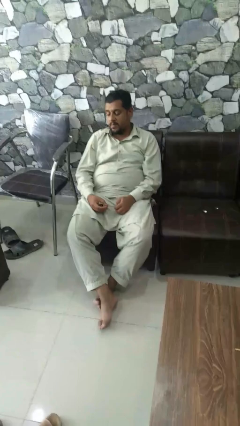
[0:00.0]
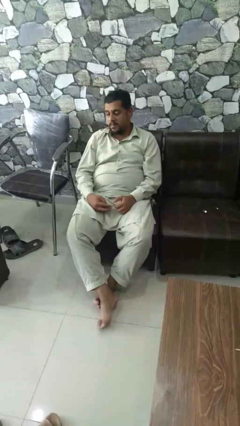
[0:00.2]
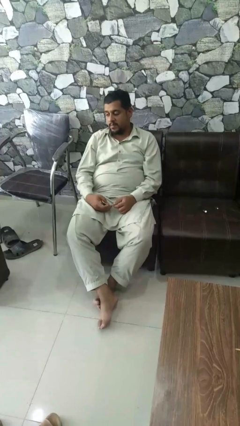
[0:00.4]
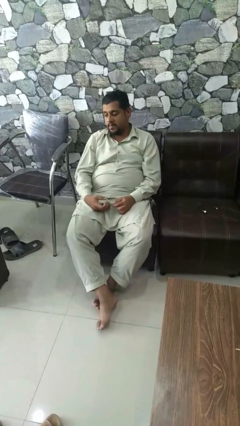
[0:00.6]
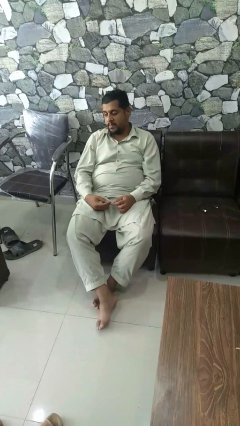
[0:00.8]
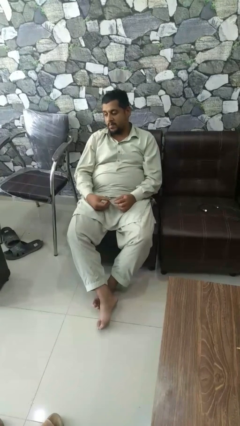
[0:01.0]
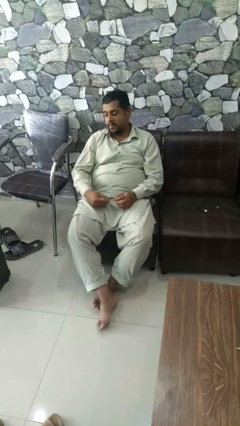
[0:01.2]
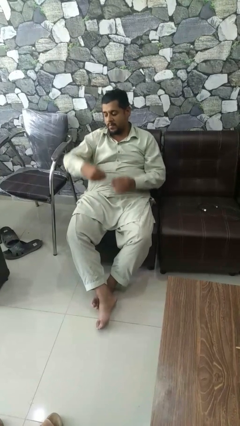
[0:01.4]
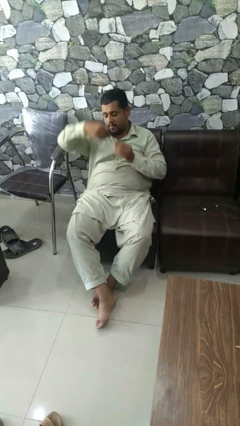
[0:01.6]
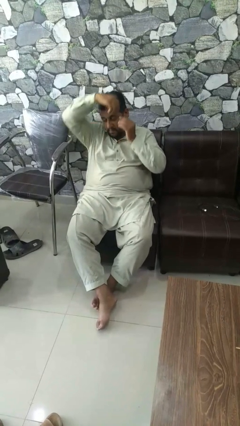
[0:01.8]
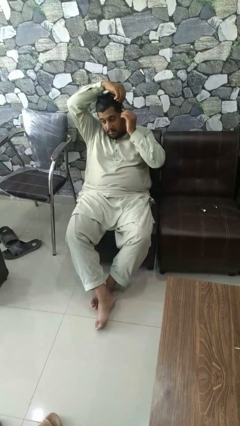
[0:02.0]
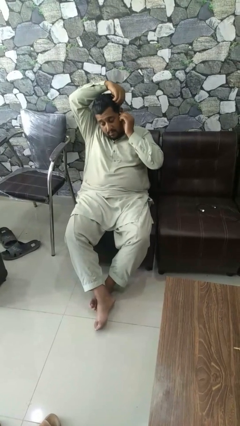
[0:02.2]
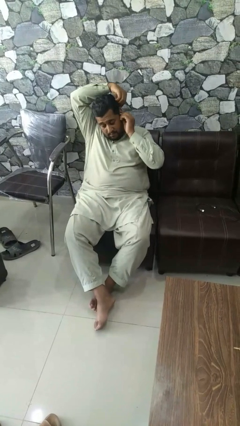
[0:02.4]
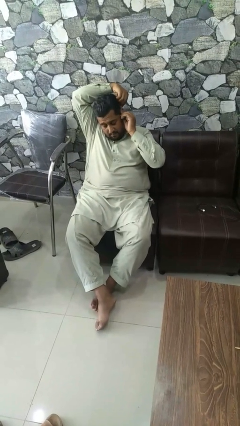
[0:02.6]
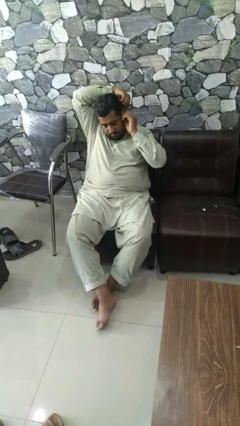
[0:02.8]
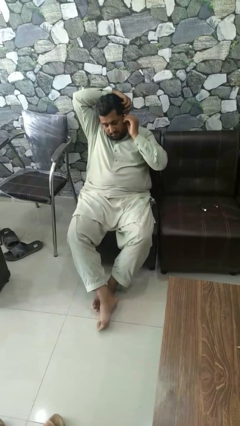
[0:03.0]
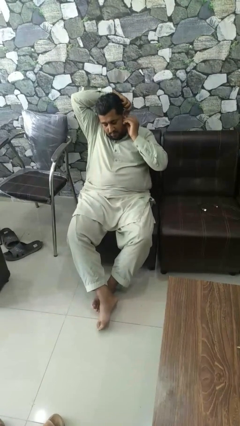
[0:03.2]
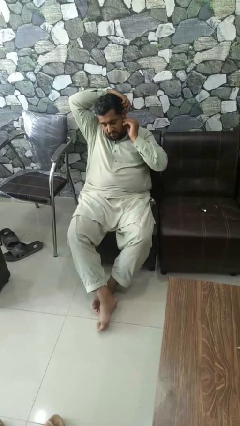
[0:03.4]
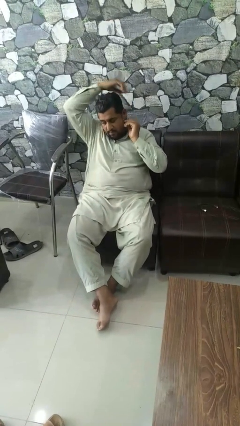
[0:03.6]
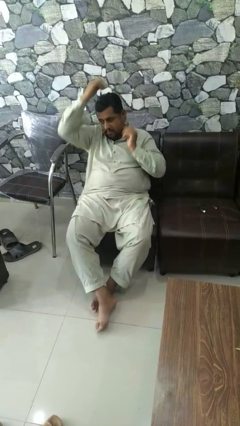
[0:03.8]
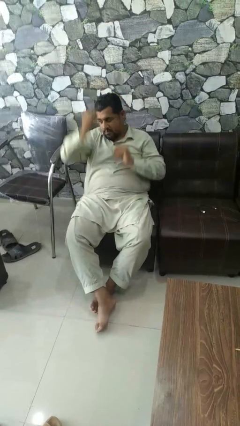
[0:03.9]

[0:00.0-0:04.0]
person puts on earrings

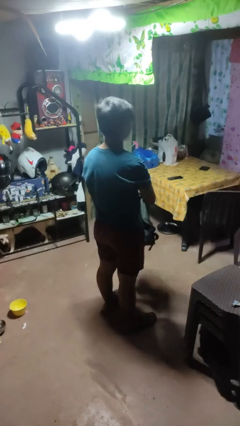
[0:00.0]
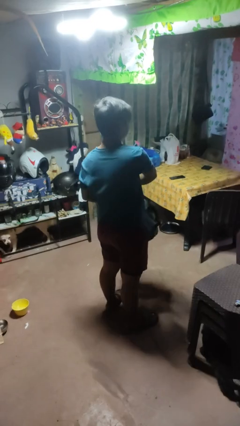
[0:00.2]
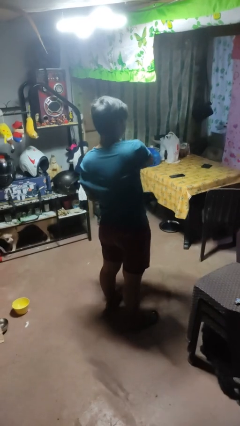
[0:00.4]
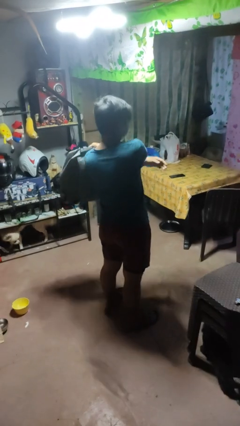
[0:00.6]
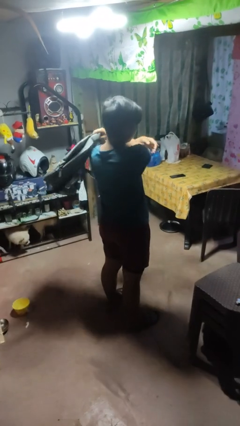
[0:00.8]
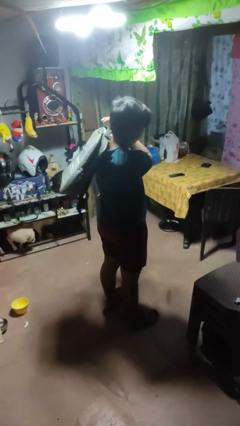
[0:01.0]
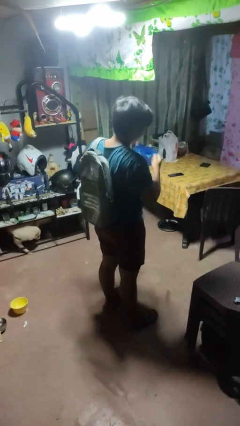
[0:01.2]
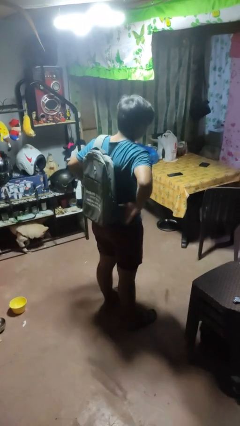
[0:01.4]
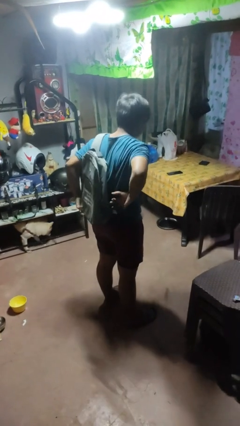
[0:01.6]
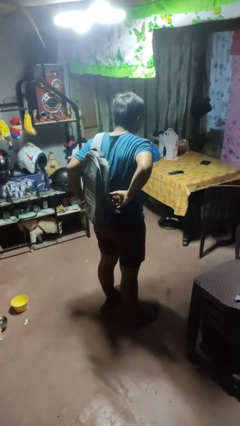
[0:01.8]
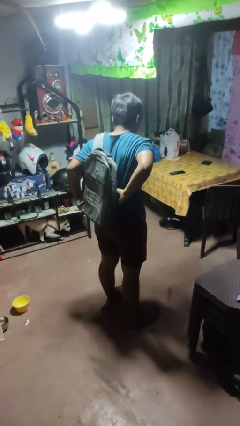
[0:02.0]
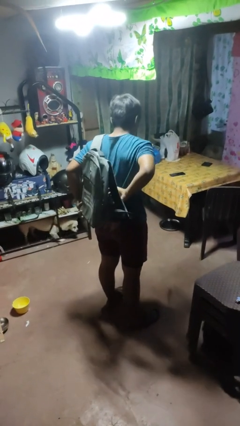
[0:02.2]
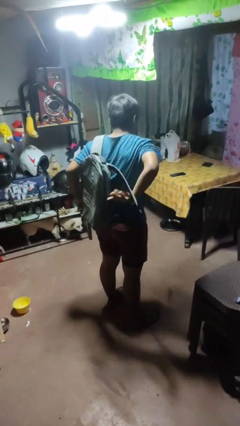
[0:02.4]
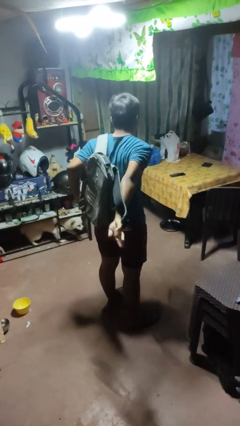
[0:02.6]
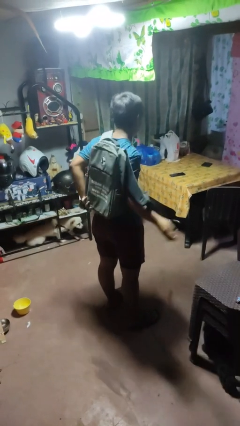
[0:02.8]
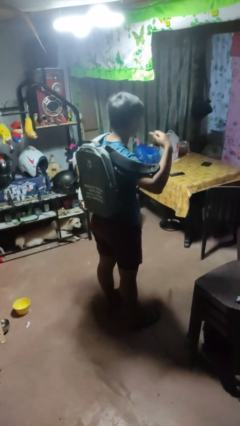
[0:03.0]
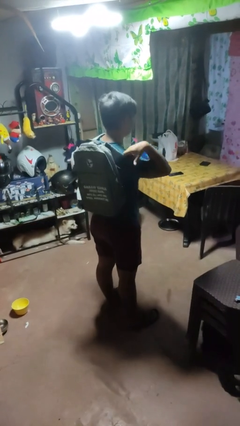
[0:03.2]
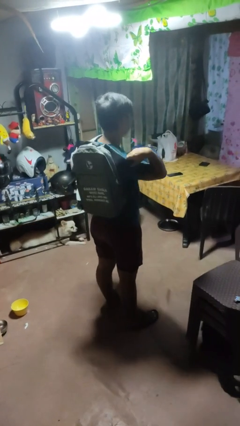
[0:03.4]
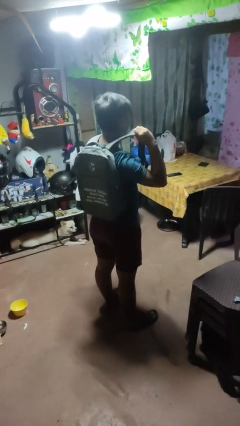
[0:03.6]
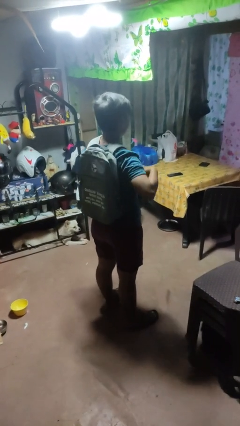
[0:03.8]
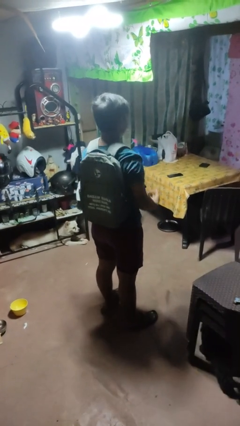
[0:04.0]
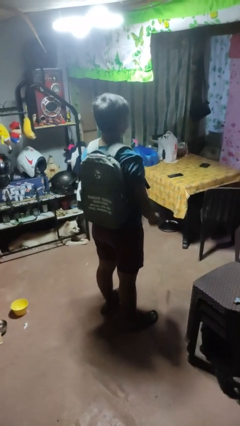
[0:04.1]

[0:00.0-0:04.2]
person puts on backpack

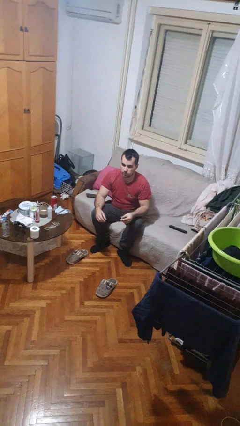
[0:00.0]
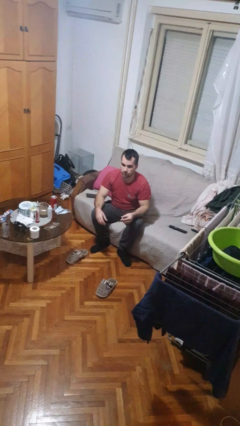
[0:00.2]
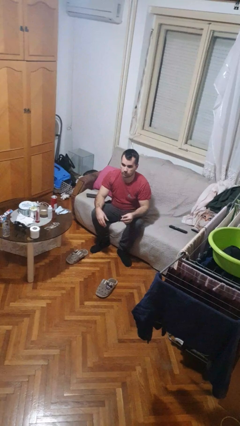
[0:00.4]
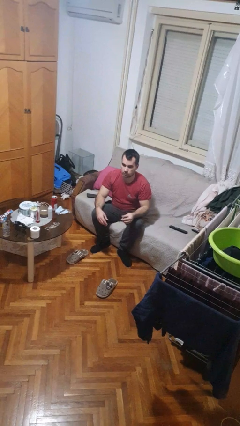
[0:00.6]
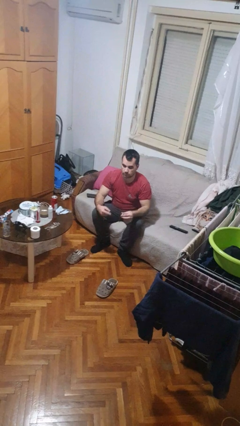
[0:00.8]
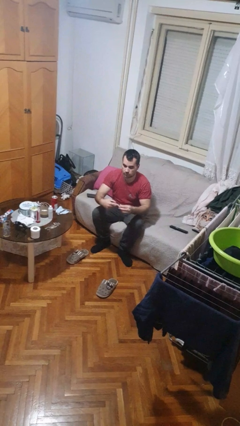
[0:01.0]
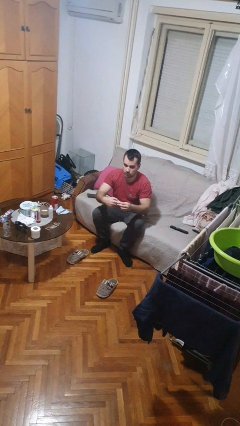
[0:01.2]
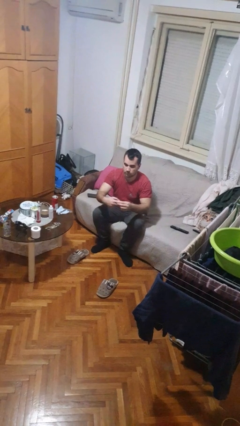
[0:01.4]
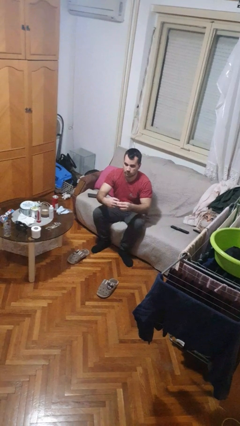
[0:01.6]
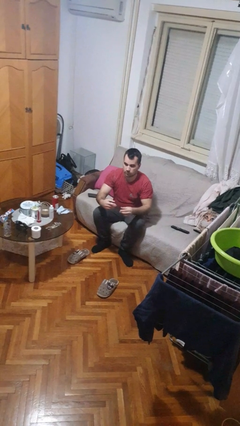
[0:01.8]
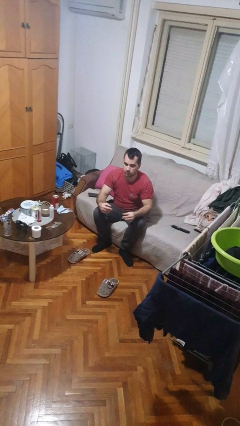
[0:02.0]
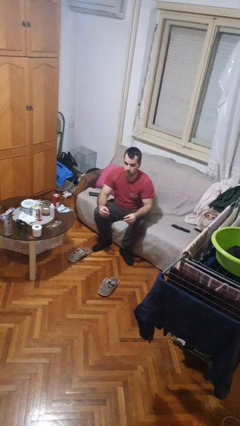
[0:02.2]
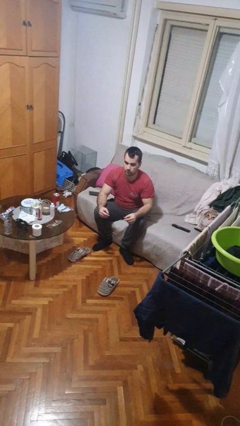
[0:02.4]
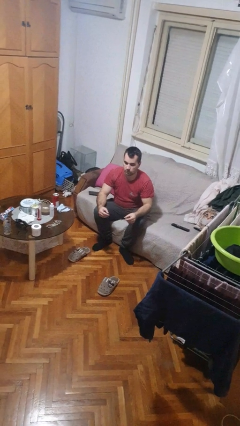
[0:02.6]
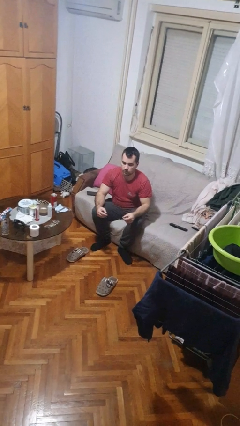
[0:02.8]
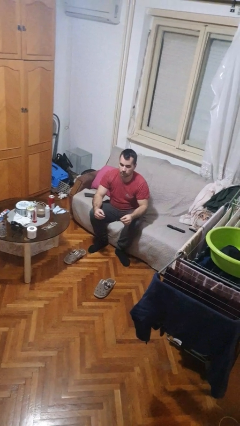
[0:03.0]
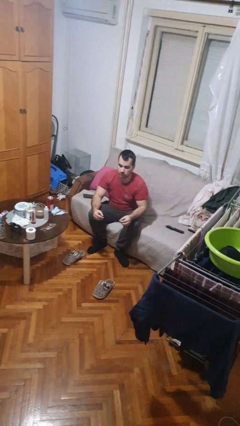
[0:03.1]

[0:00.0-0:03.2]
person puts on ring

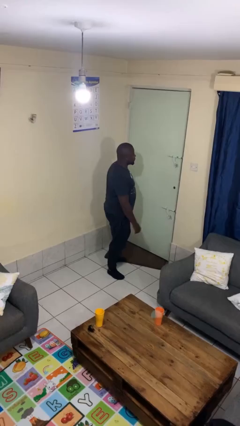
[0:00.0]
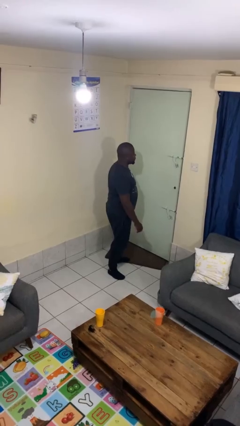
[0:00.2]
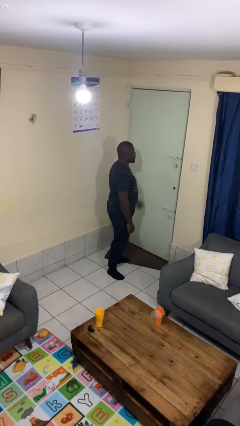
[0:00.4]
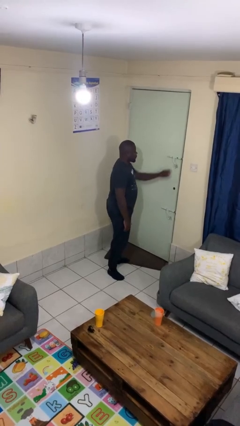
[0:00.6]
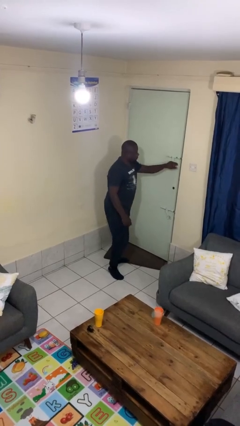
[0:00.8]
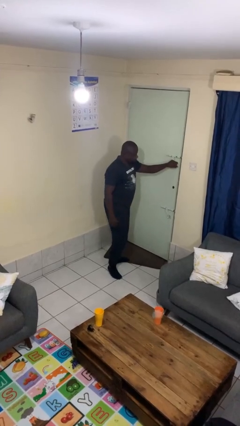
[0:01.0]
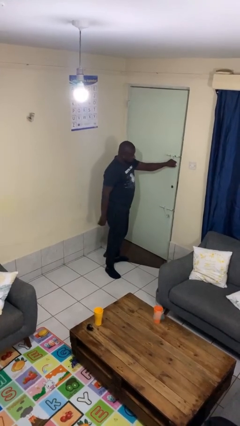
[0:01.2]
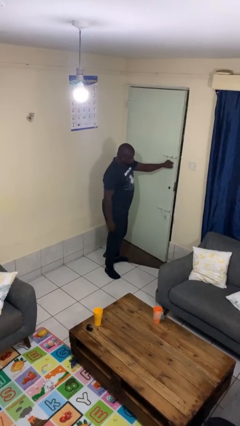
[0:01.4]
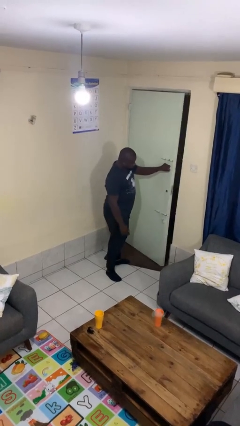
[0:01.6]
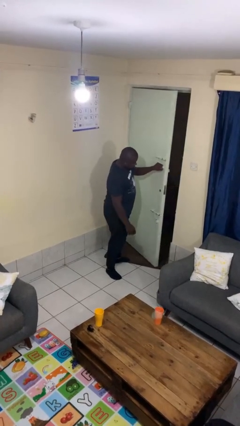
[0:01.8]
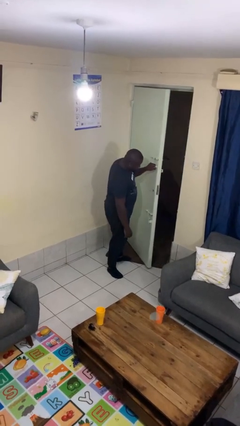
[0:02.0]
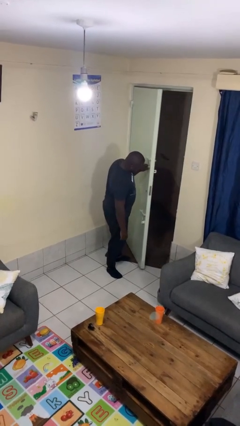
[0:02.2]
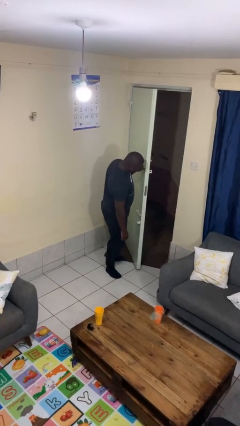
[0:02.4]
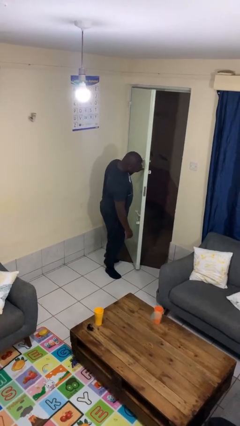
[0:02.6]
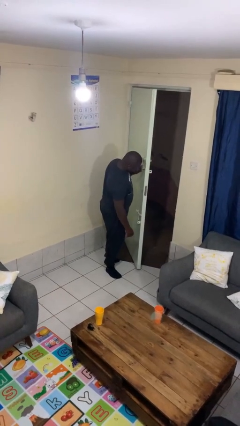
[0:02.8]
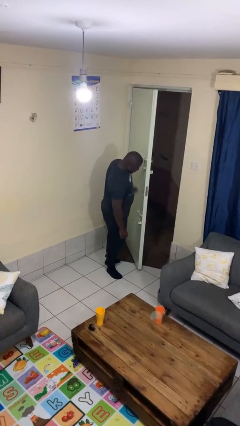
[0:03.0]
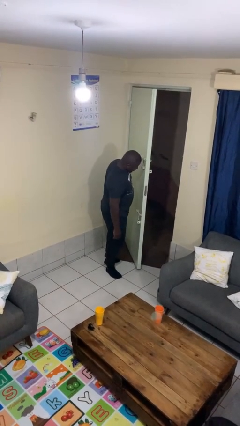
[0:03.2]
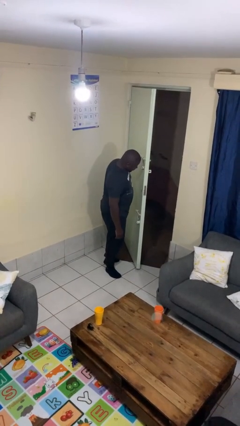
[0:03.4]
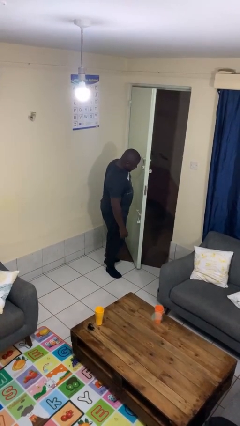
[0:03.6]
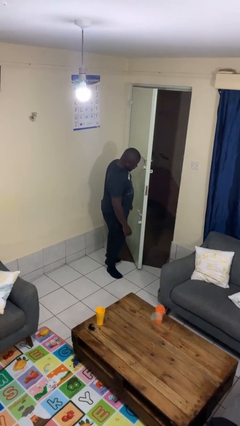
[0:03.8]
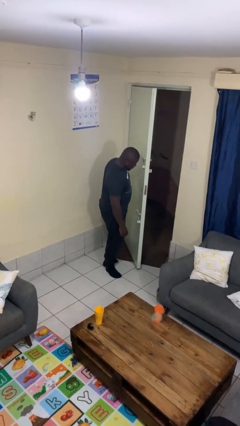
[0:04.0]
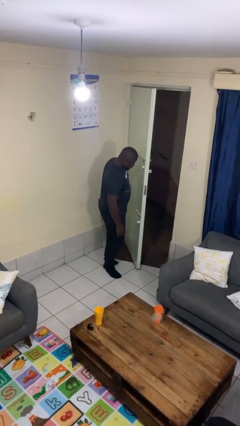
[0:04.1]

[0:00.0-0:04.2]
person opens facility door

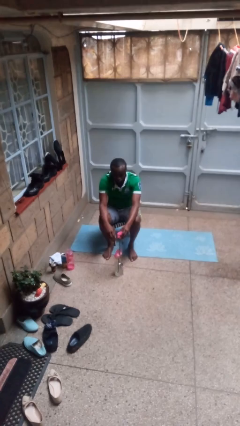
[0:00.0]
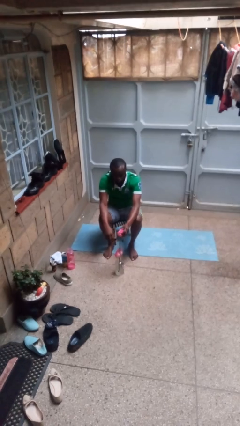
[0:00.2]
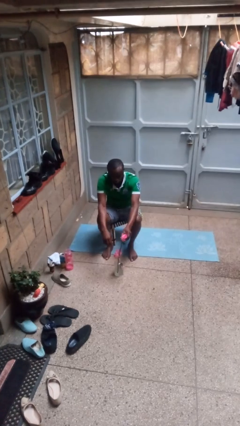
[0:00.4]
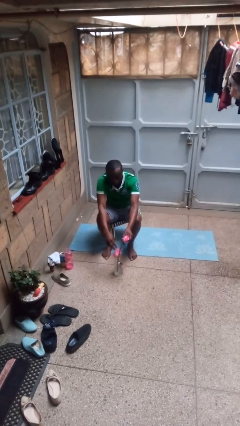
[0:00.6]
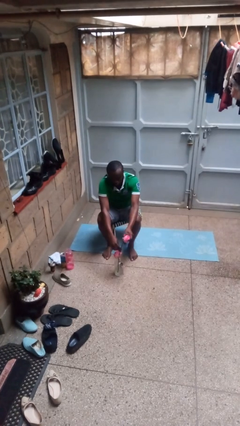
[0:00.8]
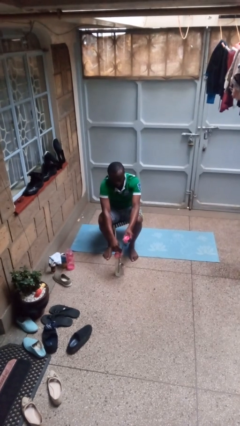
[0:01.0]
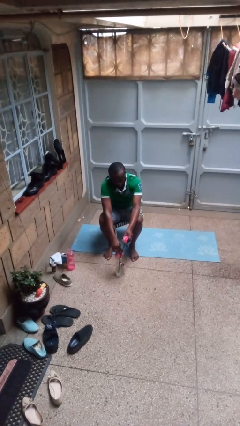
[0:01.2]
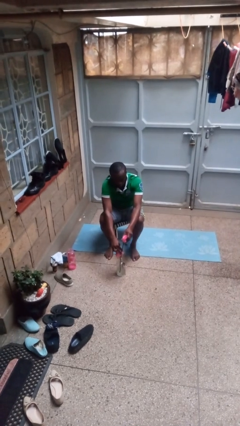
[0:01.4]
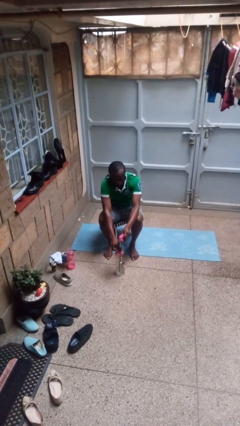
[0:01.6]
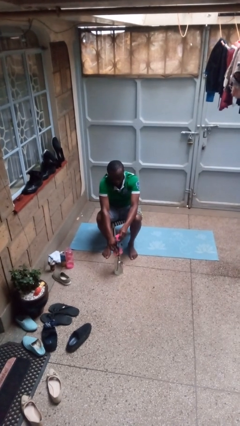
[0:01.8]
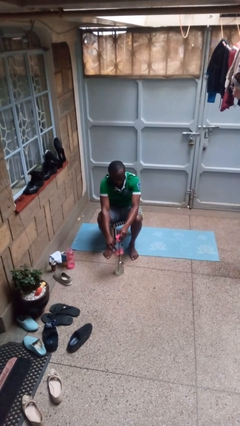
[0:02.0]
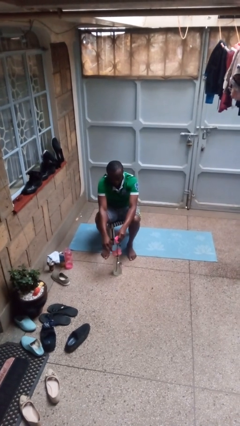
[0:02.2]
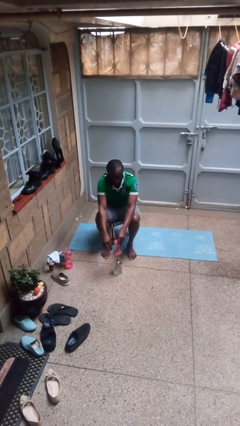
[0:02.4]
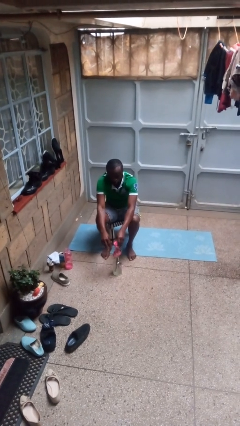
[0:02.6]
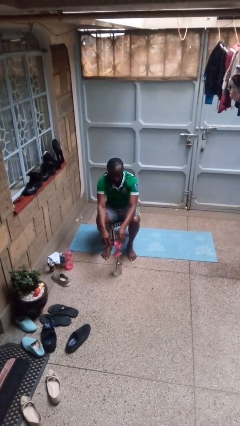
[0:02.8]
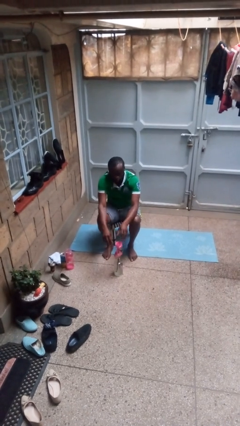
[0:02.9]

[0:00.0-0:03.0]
person arranges flowers in vase
